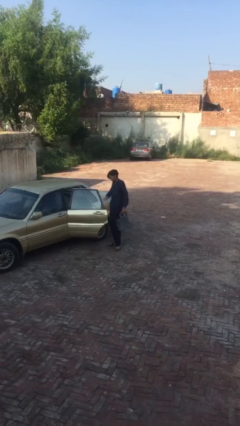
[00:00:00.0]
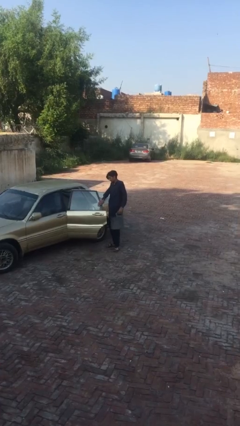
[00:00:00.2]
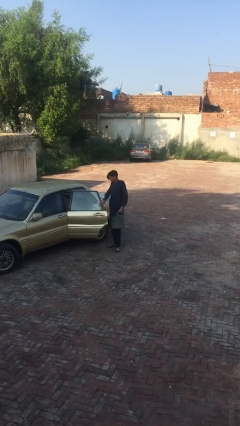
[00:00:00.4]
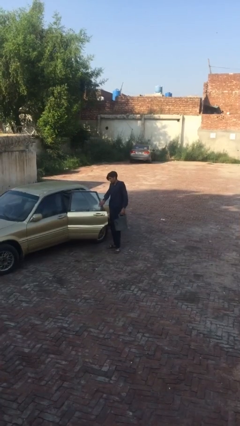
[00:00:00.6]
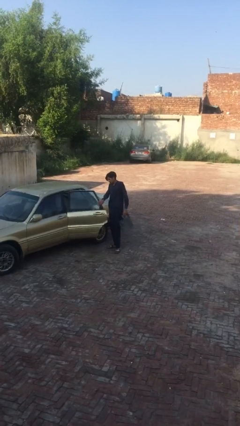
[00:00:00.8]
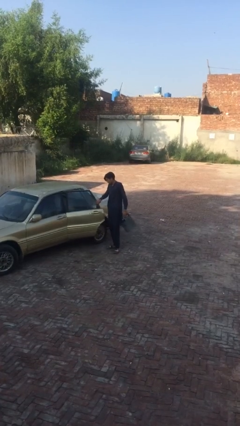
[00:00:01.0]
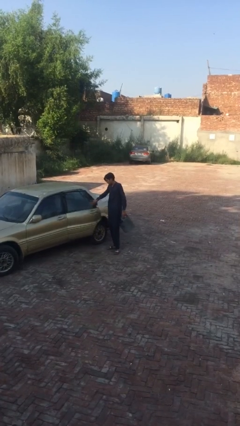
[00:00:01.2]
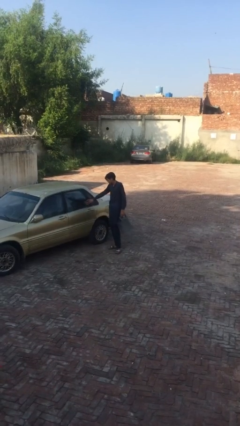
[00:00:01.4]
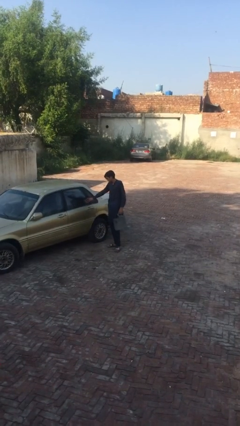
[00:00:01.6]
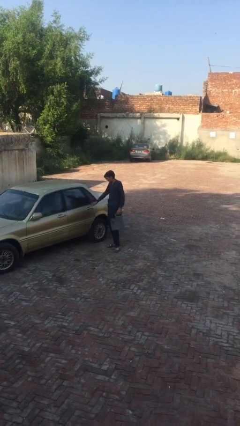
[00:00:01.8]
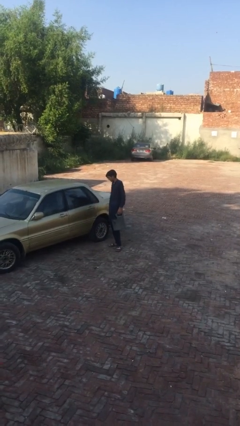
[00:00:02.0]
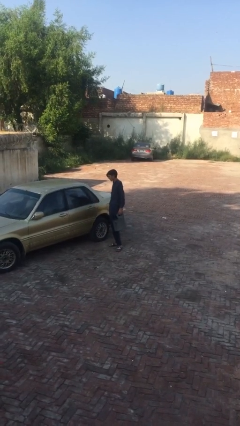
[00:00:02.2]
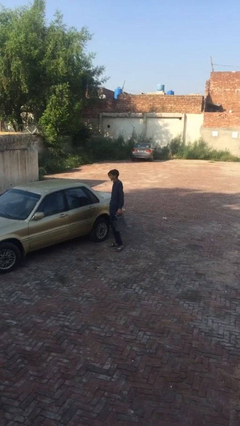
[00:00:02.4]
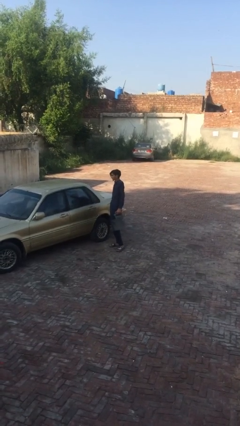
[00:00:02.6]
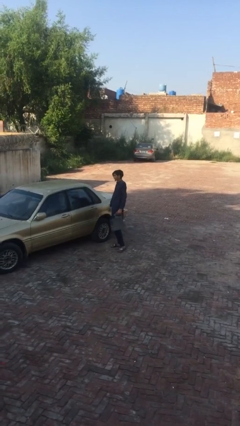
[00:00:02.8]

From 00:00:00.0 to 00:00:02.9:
person closes car door

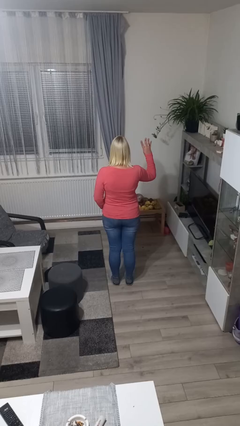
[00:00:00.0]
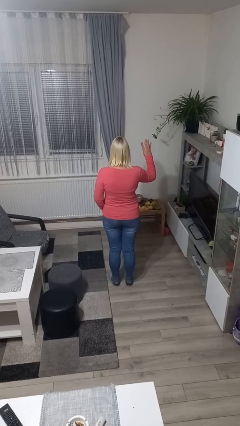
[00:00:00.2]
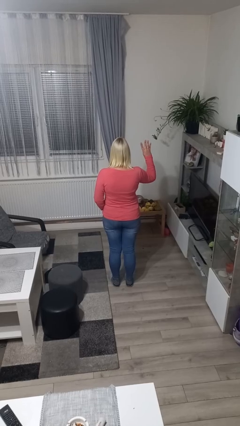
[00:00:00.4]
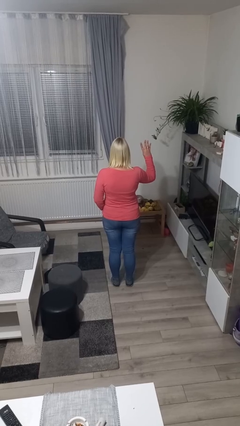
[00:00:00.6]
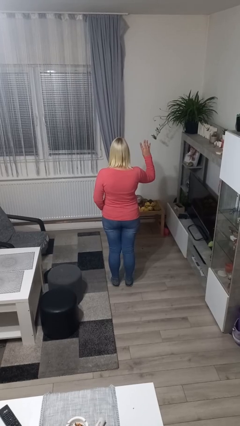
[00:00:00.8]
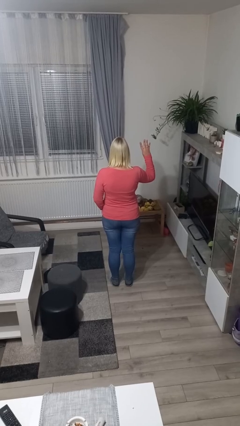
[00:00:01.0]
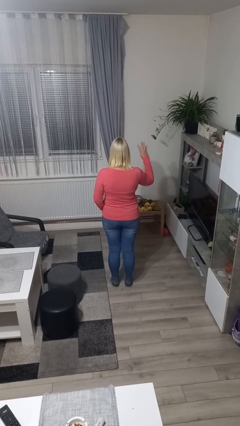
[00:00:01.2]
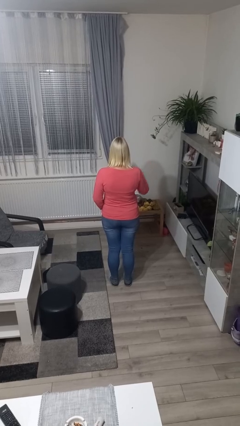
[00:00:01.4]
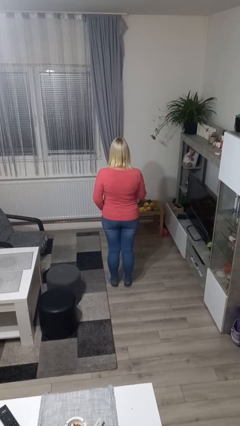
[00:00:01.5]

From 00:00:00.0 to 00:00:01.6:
person gestures number four

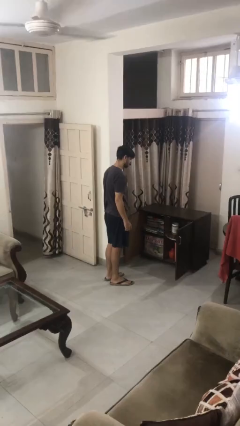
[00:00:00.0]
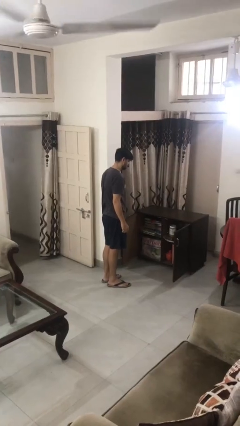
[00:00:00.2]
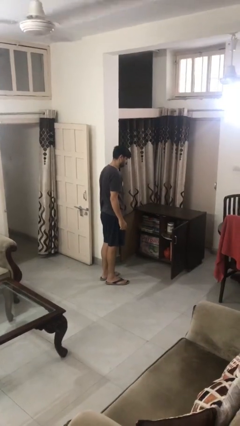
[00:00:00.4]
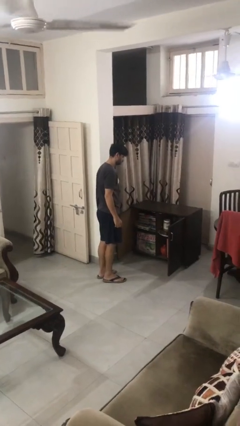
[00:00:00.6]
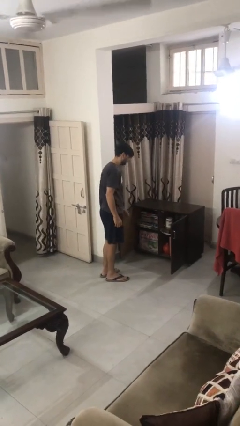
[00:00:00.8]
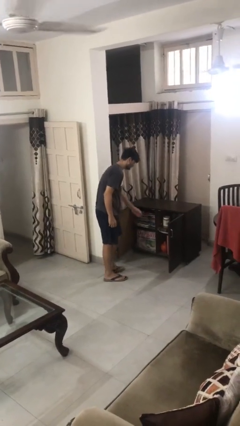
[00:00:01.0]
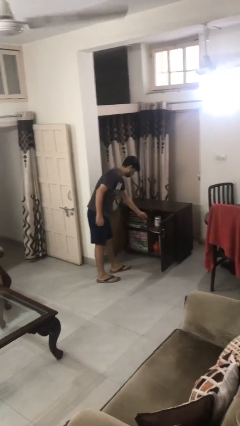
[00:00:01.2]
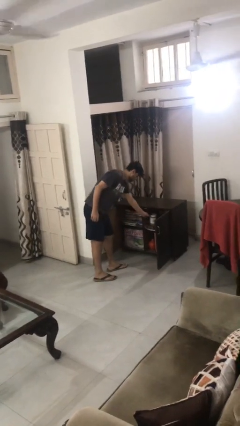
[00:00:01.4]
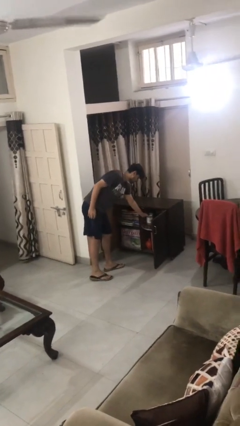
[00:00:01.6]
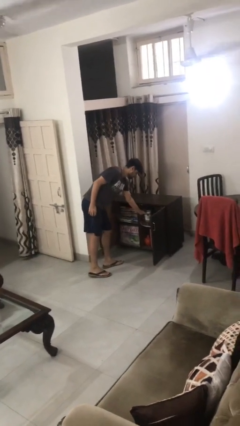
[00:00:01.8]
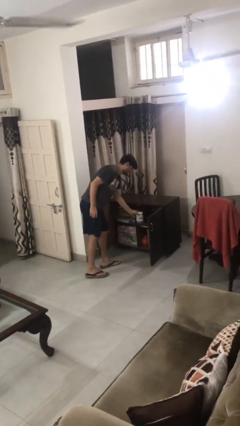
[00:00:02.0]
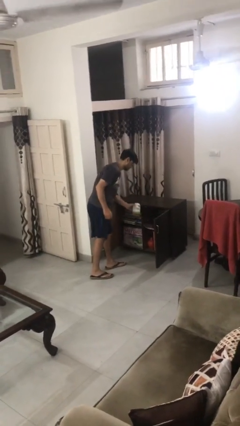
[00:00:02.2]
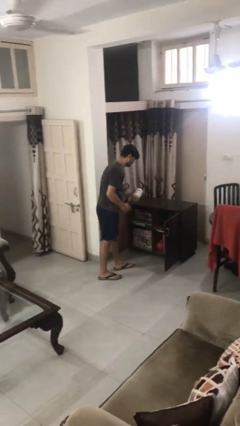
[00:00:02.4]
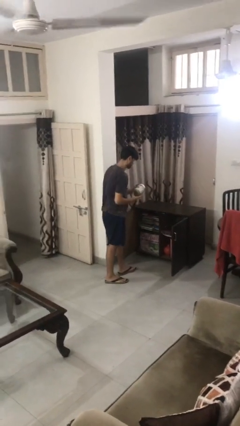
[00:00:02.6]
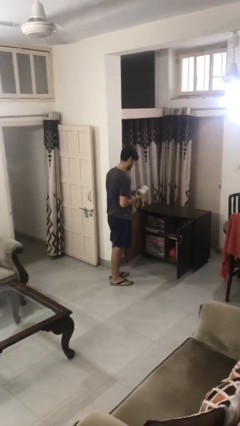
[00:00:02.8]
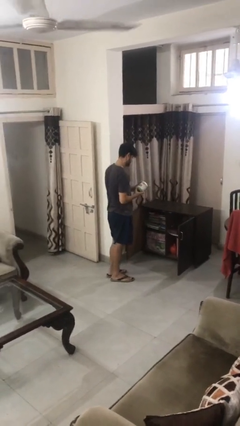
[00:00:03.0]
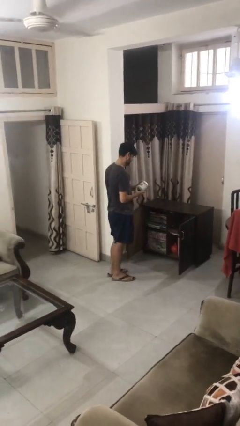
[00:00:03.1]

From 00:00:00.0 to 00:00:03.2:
person picks up object from cabinet

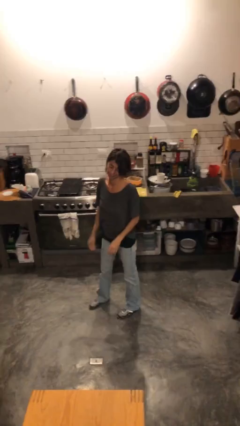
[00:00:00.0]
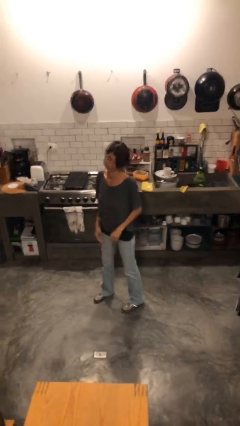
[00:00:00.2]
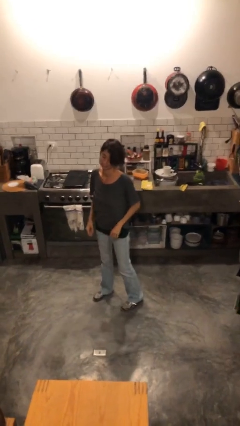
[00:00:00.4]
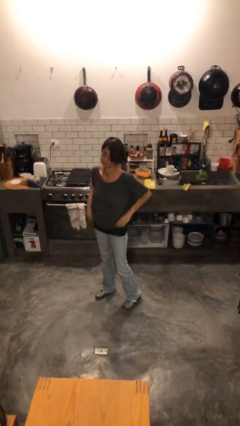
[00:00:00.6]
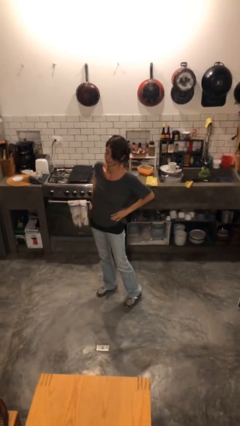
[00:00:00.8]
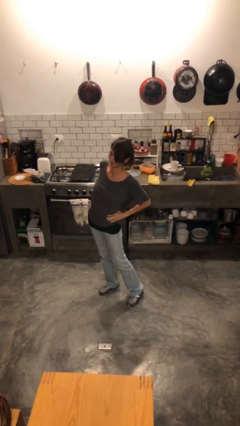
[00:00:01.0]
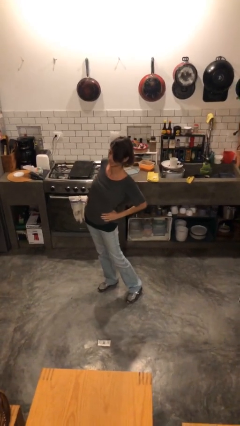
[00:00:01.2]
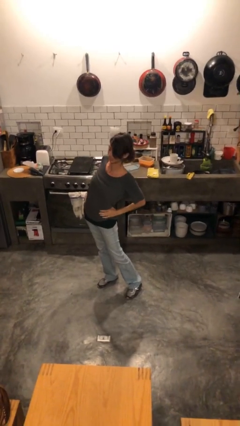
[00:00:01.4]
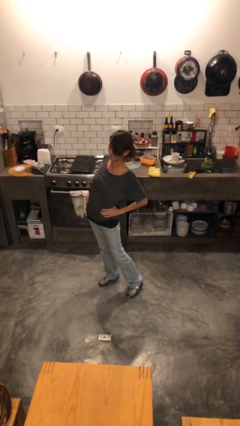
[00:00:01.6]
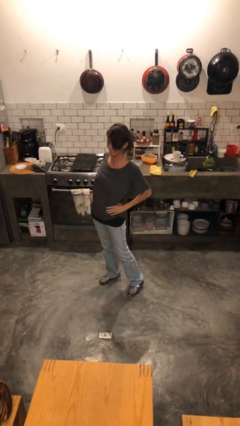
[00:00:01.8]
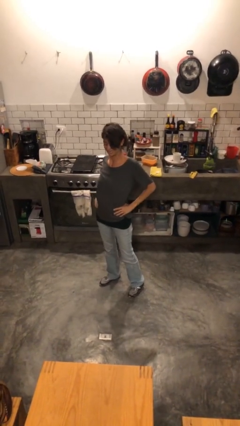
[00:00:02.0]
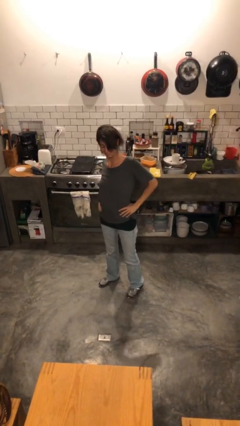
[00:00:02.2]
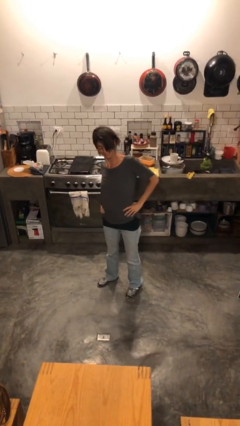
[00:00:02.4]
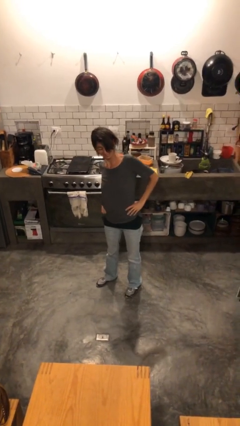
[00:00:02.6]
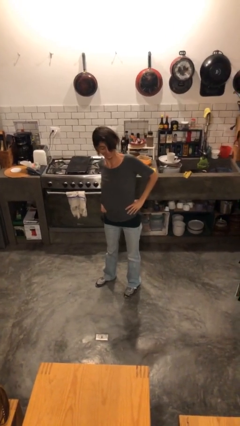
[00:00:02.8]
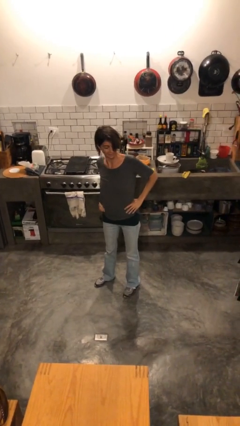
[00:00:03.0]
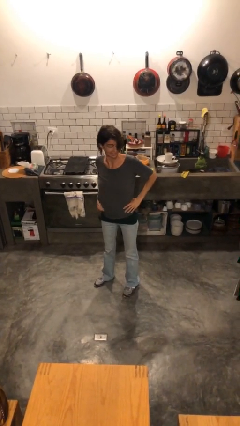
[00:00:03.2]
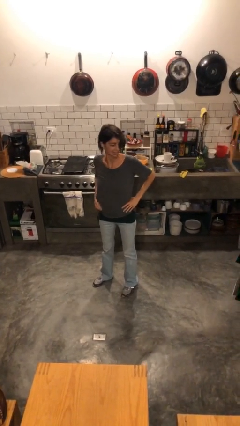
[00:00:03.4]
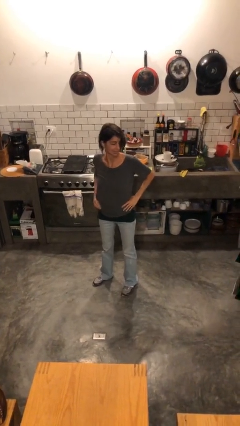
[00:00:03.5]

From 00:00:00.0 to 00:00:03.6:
person stretches back

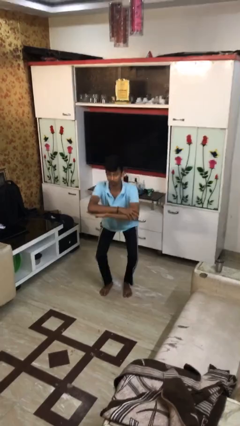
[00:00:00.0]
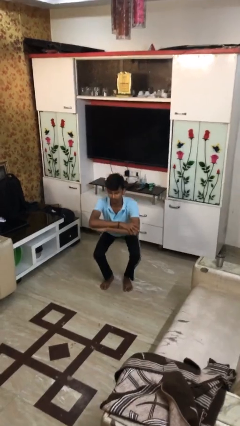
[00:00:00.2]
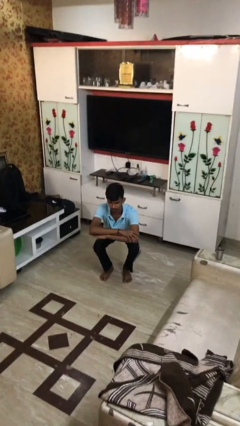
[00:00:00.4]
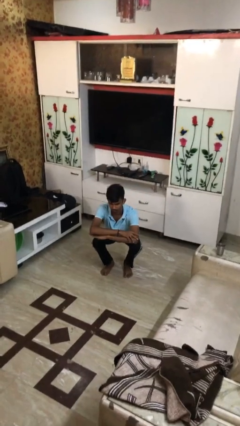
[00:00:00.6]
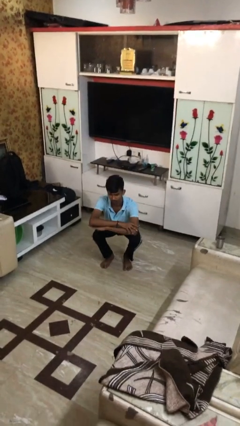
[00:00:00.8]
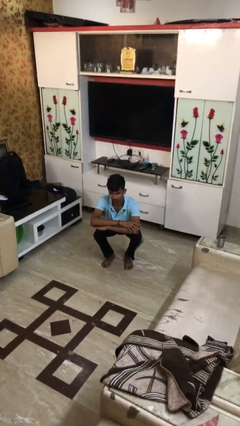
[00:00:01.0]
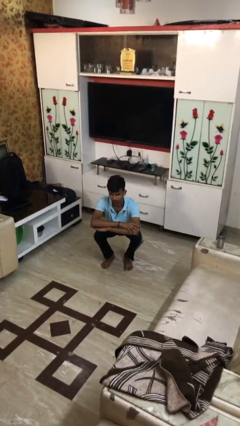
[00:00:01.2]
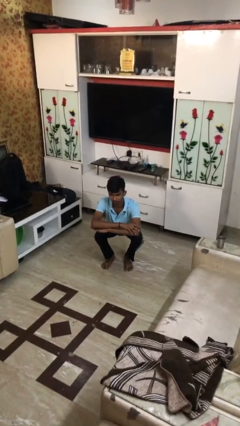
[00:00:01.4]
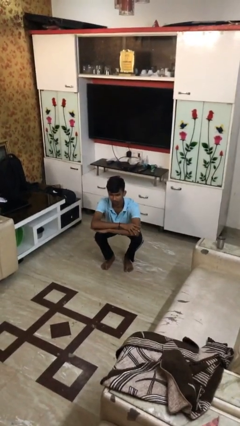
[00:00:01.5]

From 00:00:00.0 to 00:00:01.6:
person squats

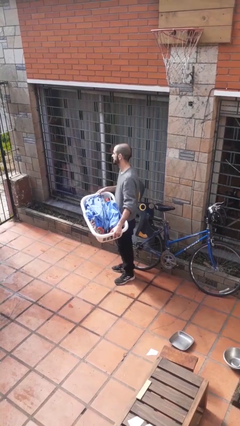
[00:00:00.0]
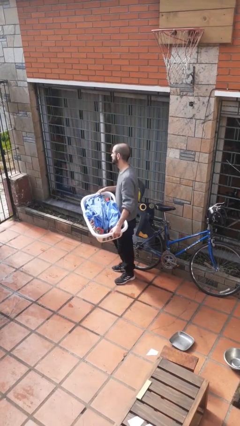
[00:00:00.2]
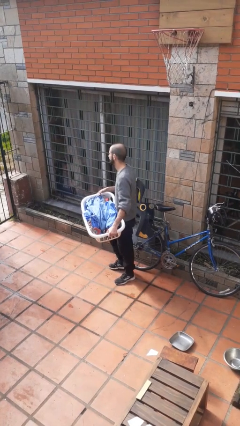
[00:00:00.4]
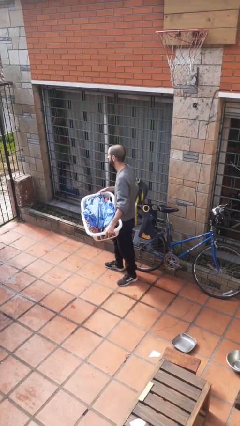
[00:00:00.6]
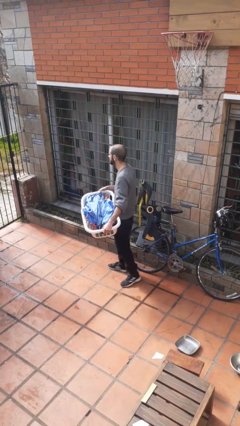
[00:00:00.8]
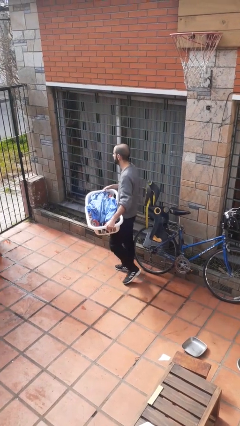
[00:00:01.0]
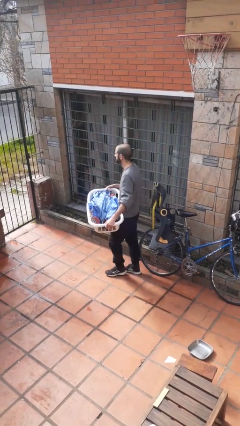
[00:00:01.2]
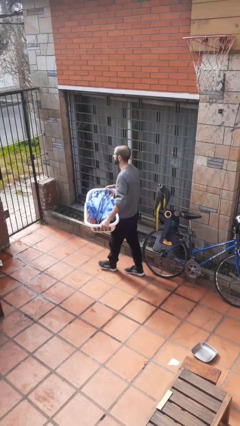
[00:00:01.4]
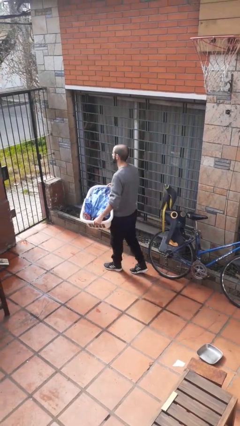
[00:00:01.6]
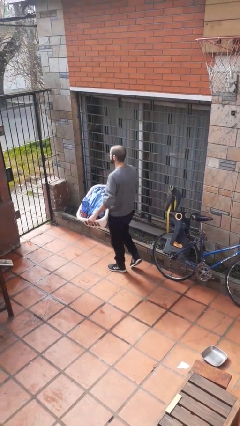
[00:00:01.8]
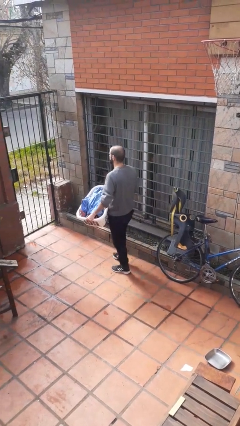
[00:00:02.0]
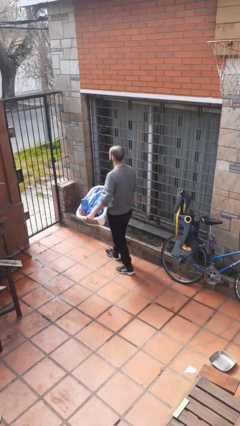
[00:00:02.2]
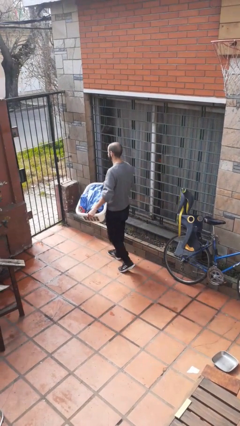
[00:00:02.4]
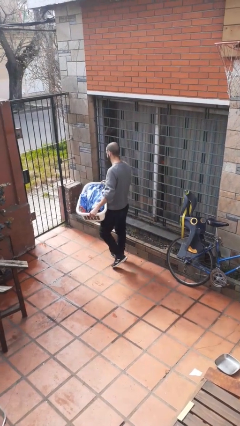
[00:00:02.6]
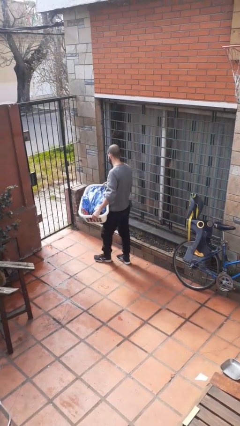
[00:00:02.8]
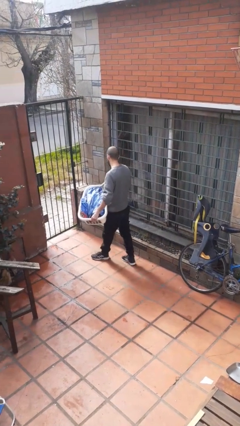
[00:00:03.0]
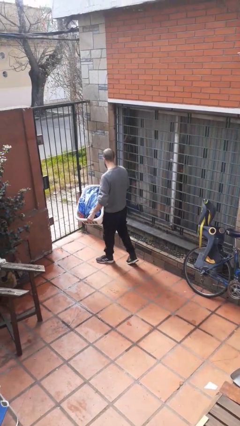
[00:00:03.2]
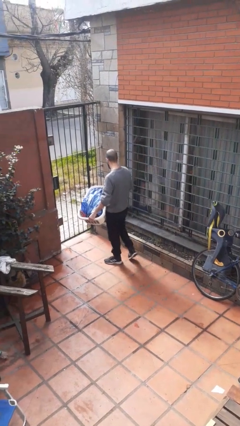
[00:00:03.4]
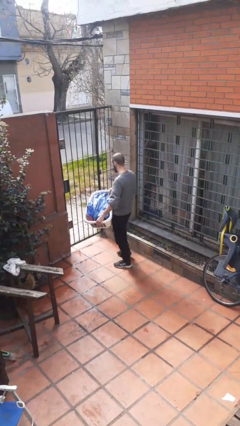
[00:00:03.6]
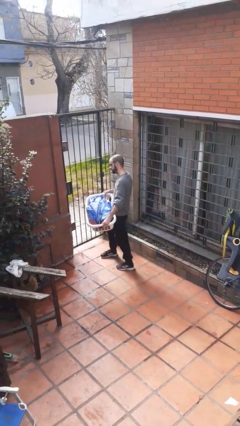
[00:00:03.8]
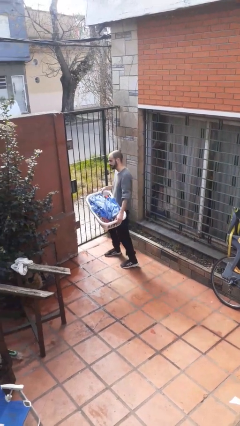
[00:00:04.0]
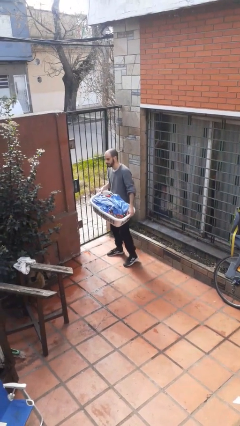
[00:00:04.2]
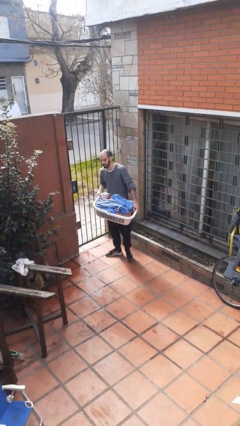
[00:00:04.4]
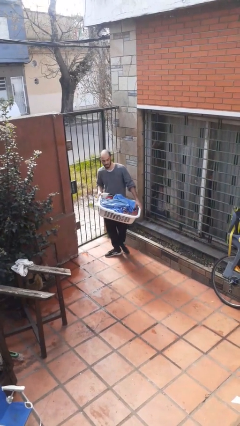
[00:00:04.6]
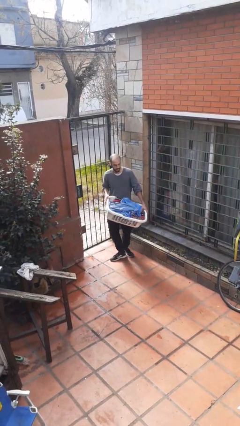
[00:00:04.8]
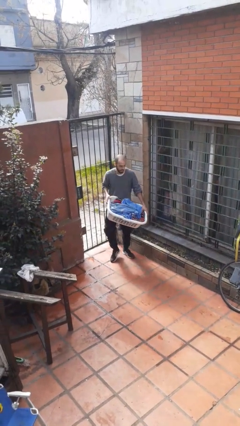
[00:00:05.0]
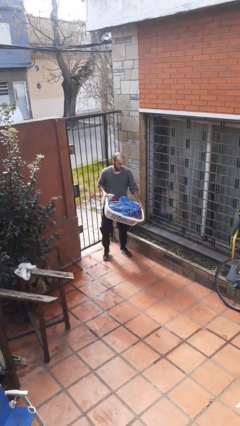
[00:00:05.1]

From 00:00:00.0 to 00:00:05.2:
person carries laundry basket
